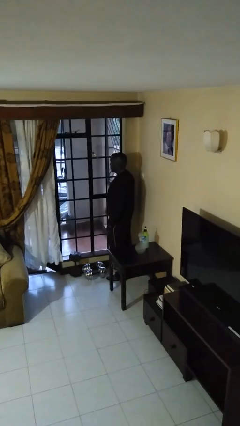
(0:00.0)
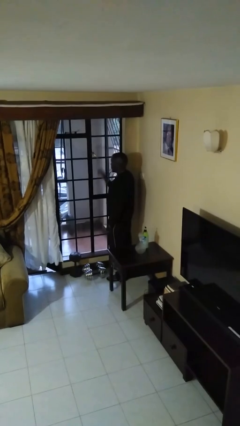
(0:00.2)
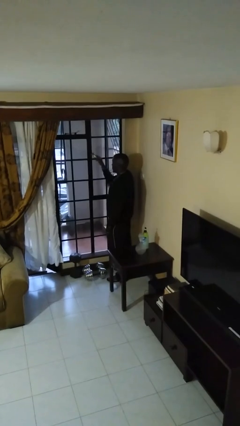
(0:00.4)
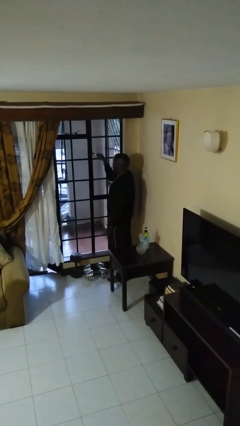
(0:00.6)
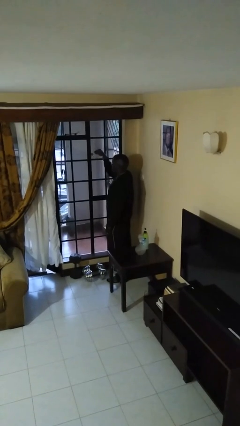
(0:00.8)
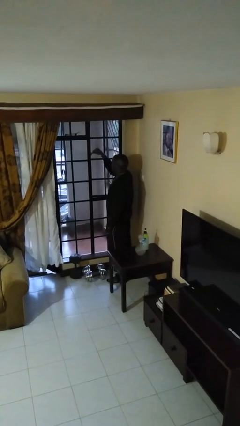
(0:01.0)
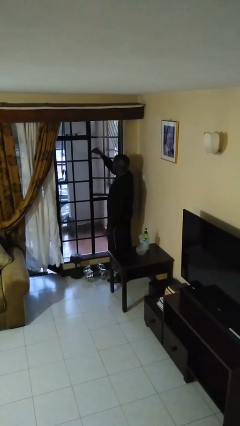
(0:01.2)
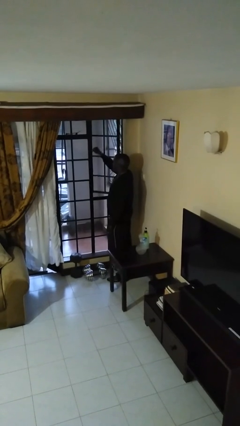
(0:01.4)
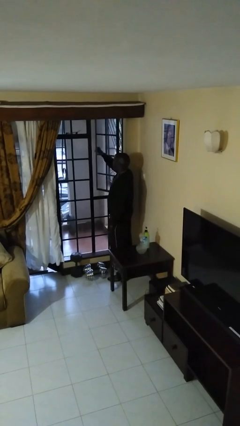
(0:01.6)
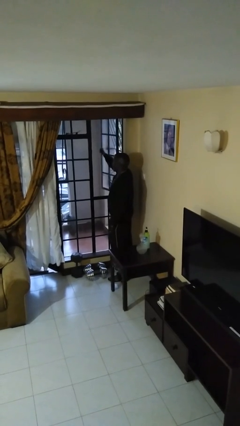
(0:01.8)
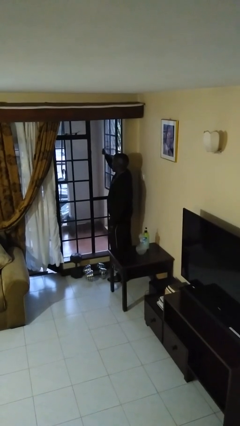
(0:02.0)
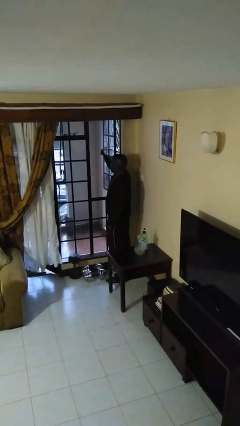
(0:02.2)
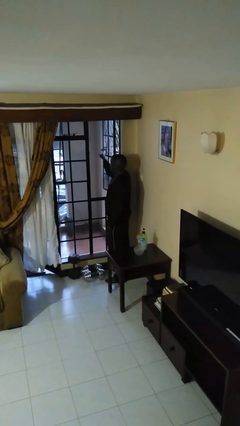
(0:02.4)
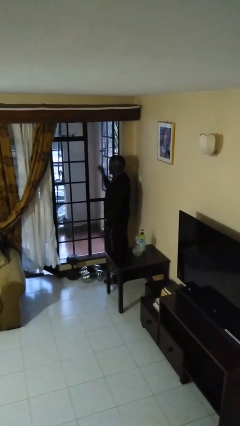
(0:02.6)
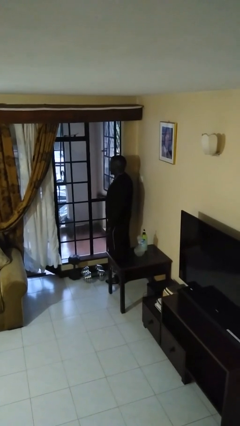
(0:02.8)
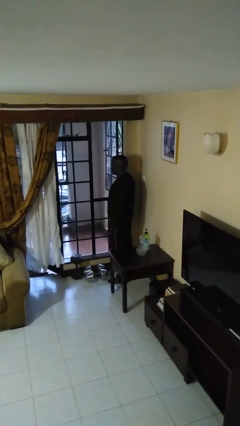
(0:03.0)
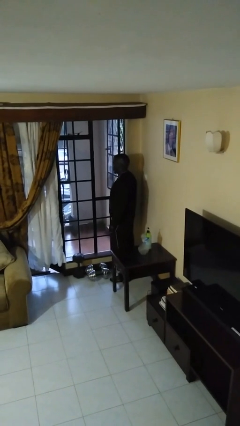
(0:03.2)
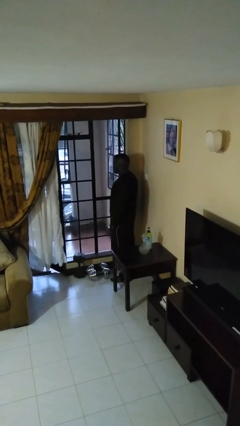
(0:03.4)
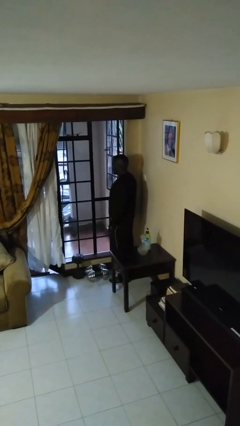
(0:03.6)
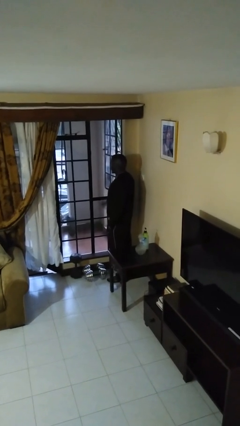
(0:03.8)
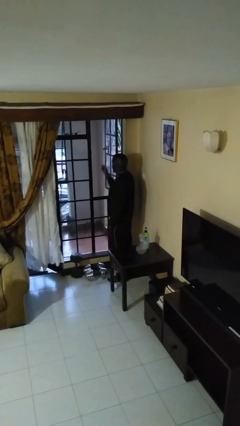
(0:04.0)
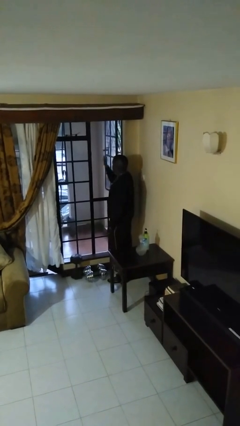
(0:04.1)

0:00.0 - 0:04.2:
person opens home window

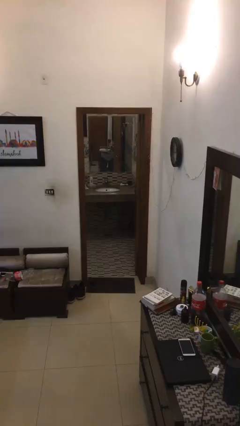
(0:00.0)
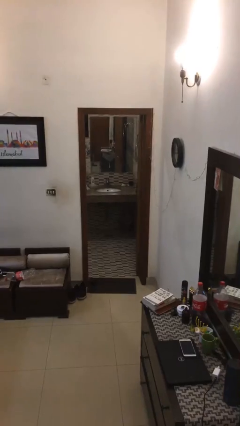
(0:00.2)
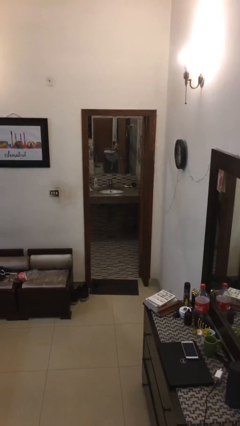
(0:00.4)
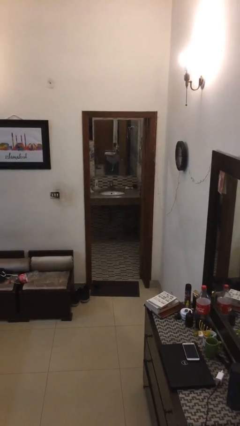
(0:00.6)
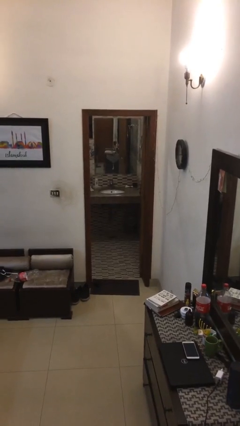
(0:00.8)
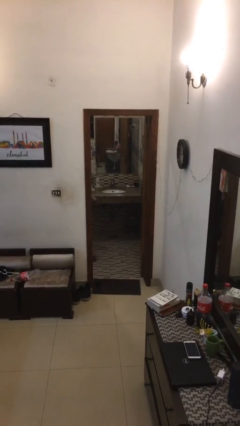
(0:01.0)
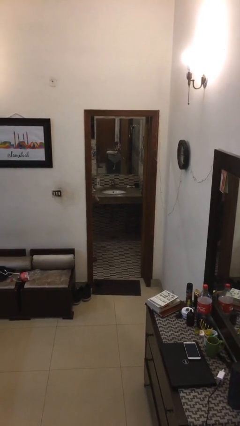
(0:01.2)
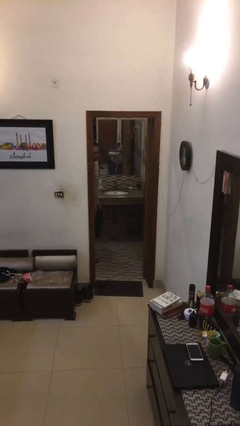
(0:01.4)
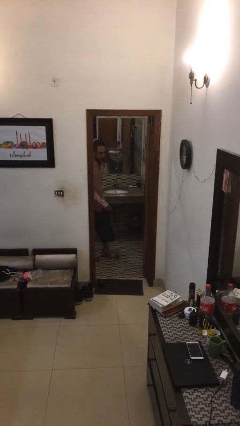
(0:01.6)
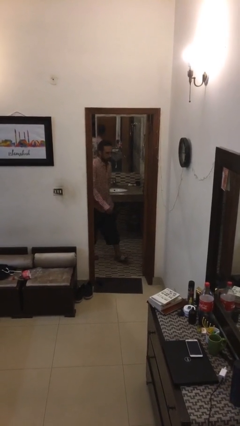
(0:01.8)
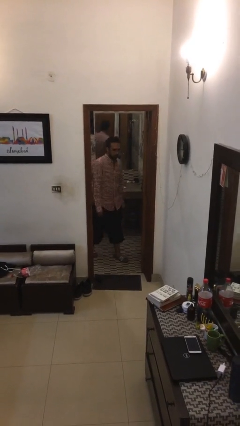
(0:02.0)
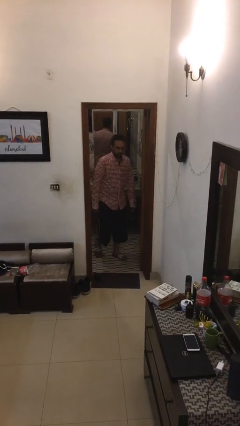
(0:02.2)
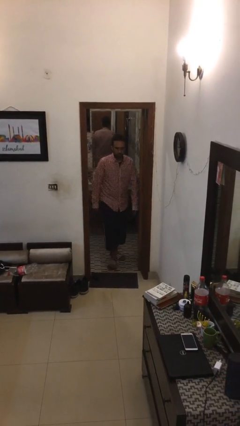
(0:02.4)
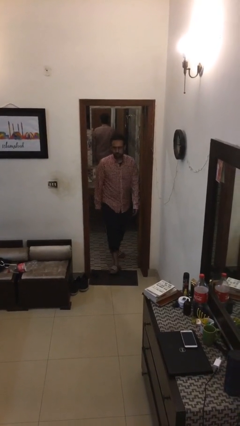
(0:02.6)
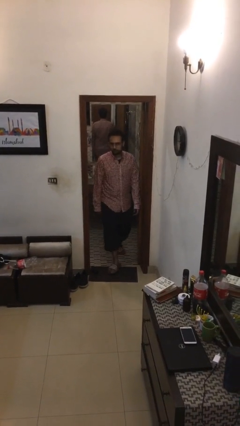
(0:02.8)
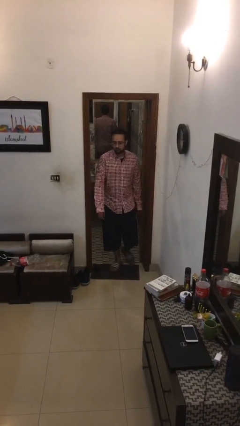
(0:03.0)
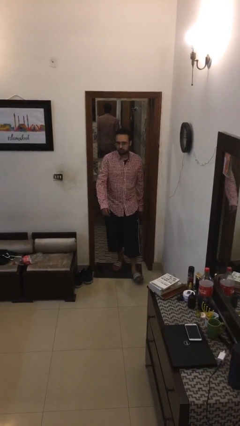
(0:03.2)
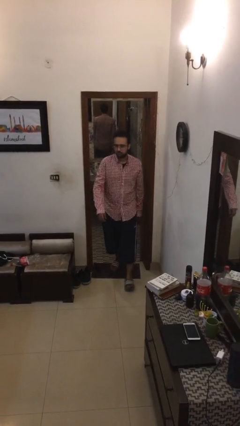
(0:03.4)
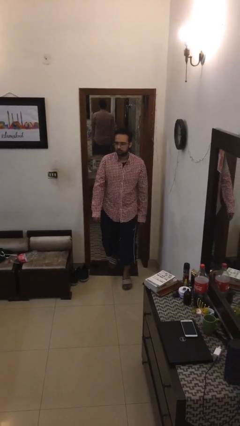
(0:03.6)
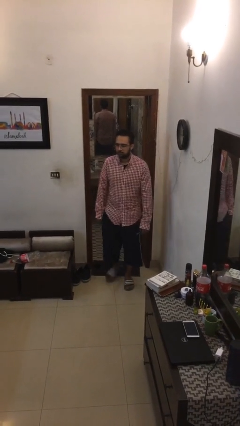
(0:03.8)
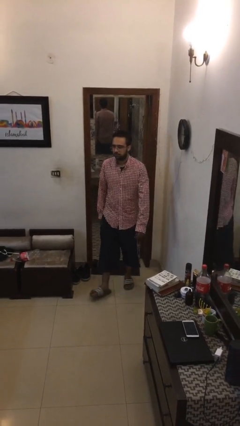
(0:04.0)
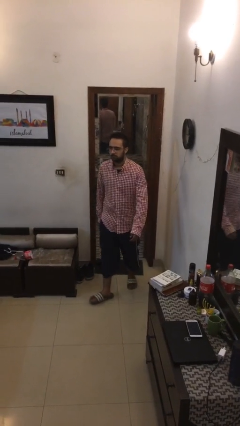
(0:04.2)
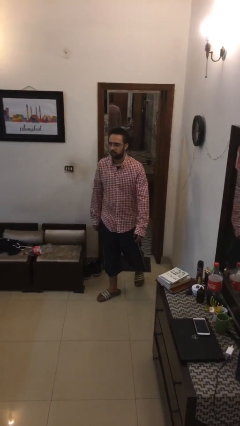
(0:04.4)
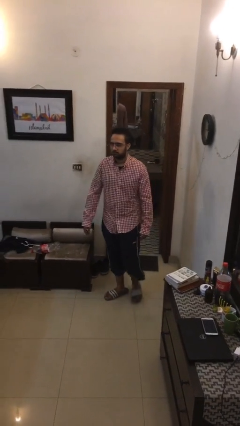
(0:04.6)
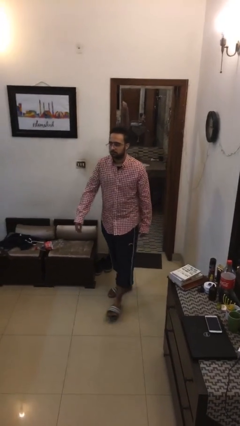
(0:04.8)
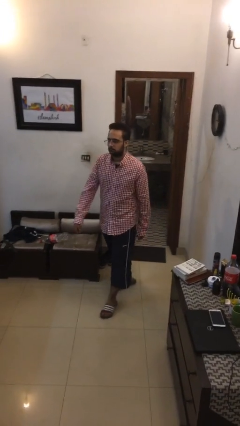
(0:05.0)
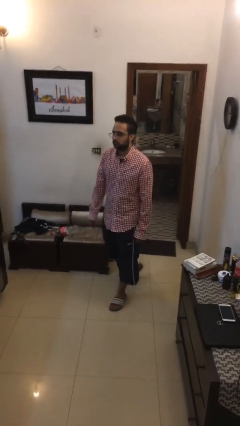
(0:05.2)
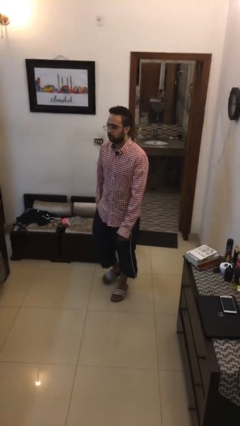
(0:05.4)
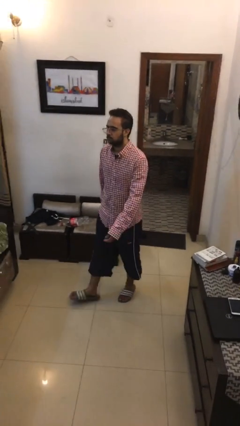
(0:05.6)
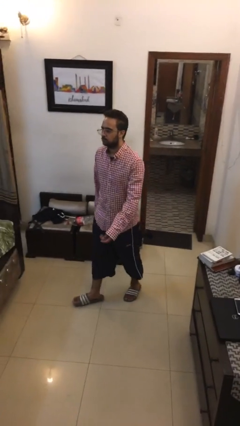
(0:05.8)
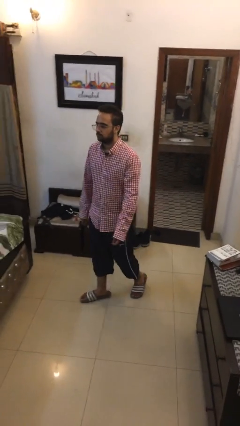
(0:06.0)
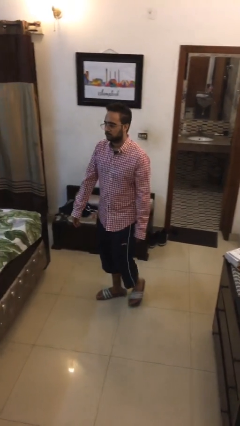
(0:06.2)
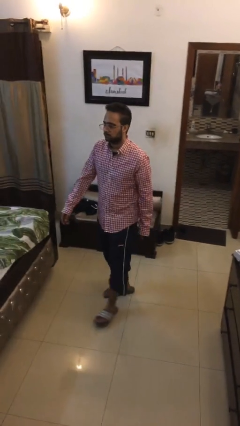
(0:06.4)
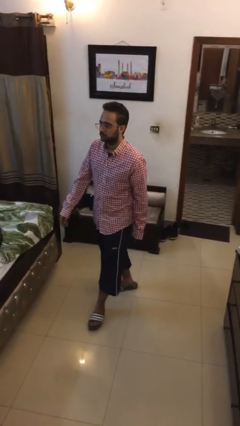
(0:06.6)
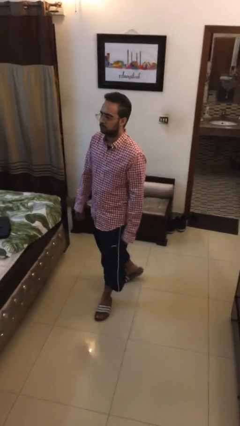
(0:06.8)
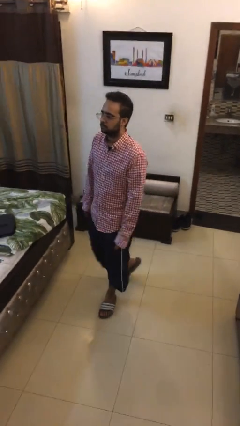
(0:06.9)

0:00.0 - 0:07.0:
person enters scene through structure

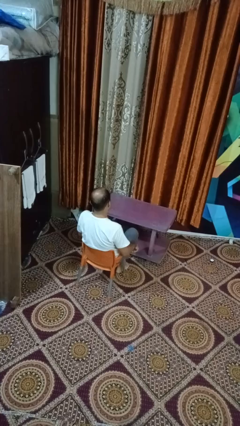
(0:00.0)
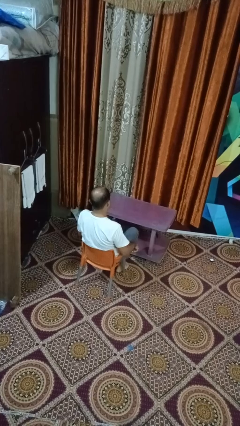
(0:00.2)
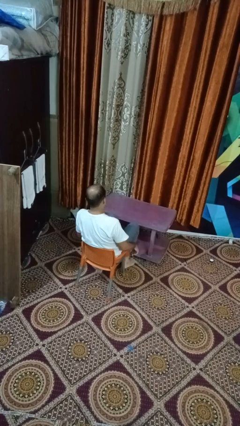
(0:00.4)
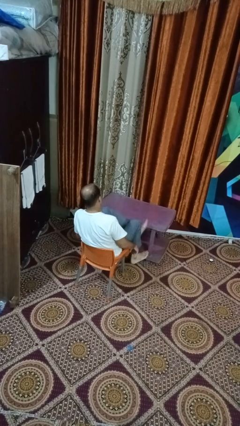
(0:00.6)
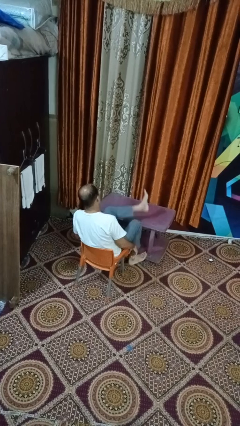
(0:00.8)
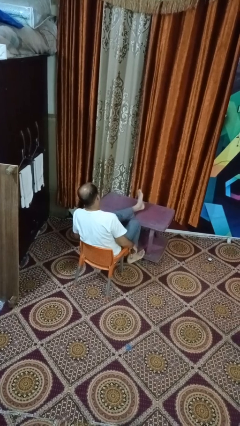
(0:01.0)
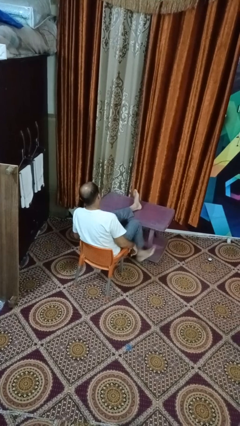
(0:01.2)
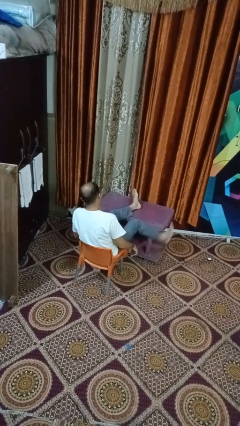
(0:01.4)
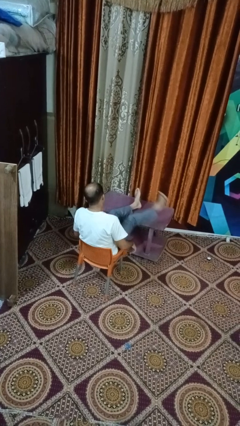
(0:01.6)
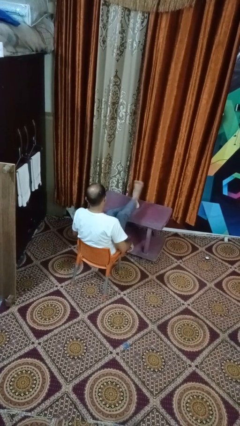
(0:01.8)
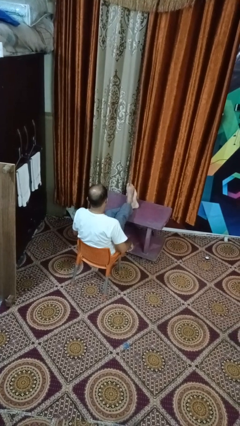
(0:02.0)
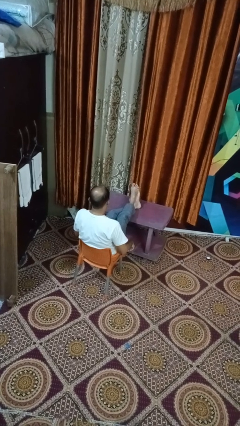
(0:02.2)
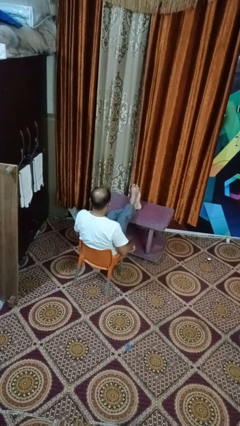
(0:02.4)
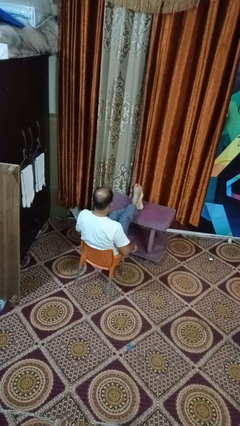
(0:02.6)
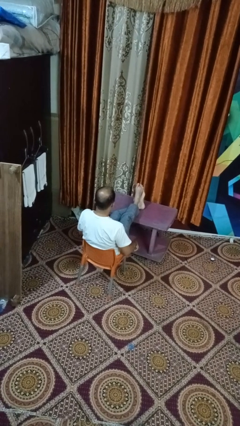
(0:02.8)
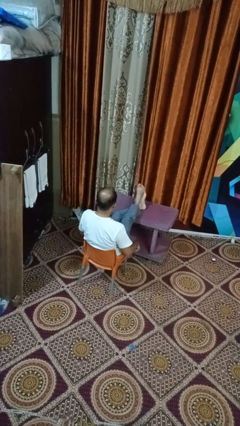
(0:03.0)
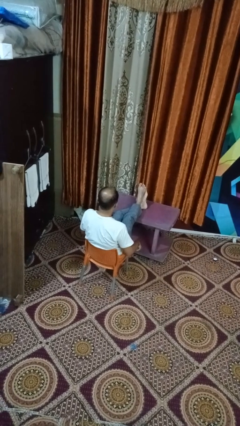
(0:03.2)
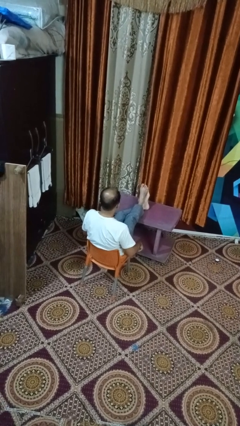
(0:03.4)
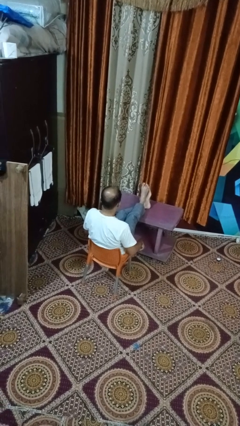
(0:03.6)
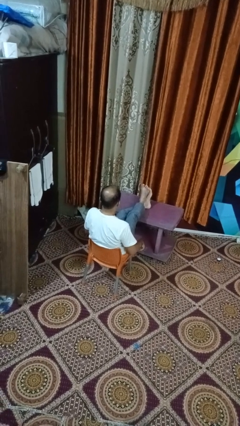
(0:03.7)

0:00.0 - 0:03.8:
person puts feet up

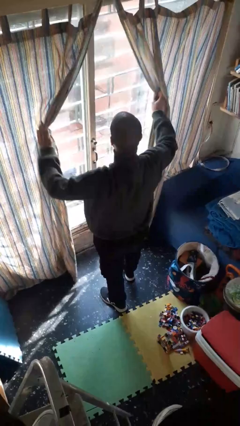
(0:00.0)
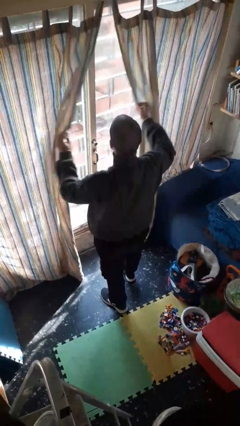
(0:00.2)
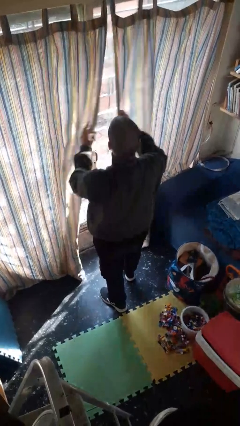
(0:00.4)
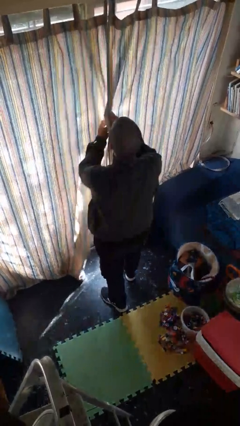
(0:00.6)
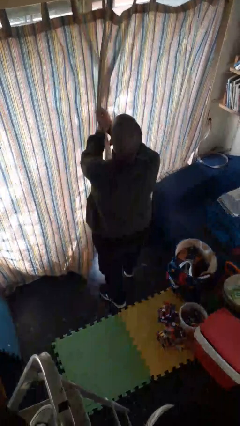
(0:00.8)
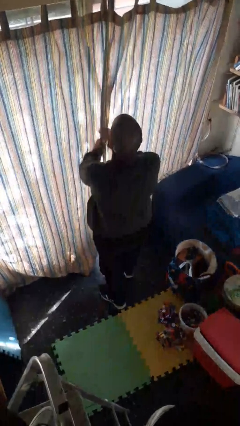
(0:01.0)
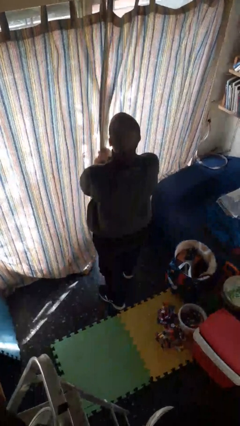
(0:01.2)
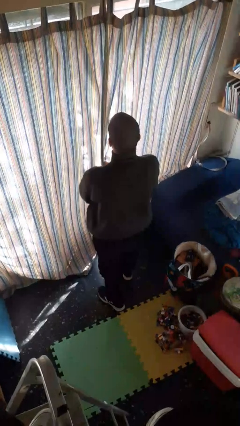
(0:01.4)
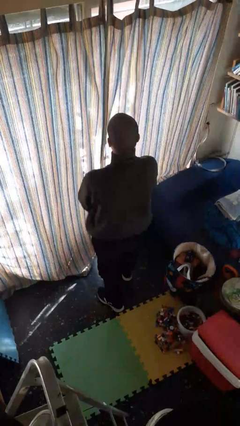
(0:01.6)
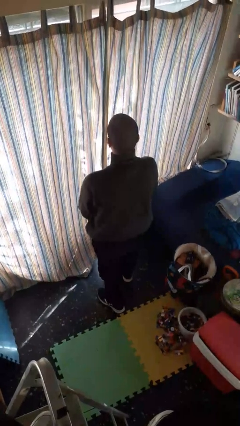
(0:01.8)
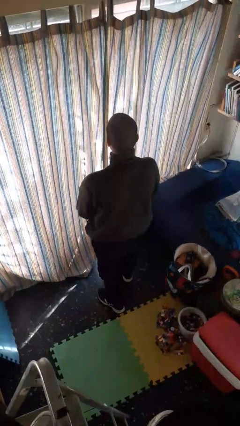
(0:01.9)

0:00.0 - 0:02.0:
person closes curtains

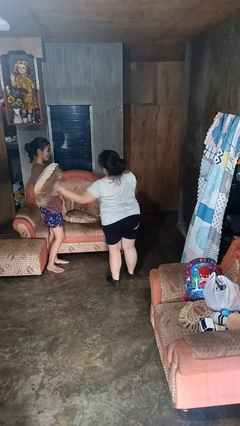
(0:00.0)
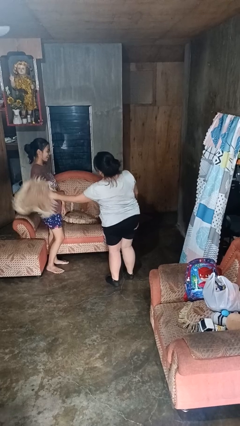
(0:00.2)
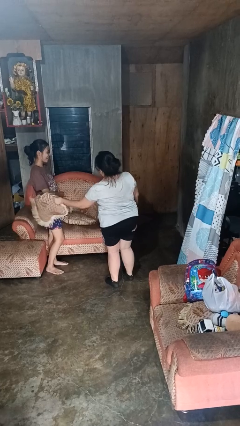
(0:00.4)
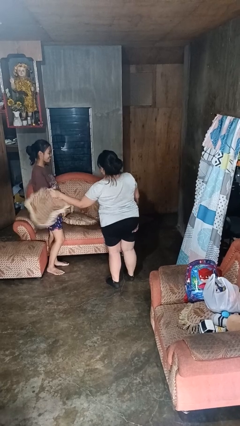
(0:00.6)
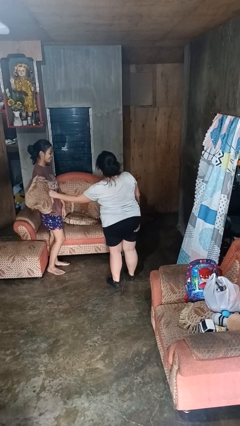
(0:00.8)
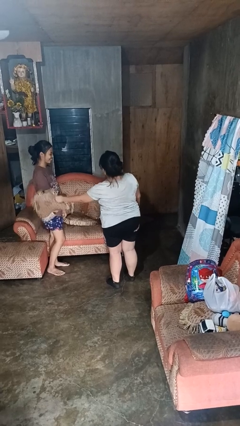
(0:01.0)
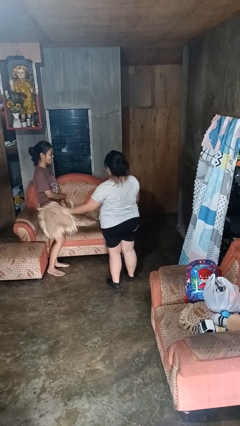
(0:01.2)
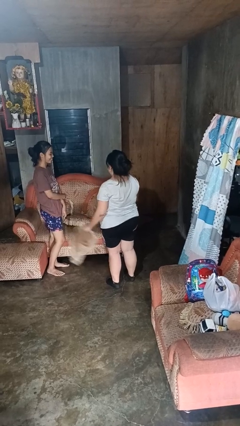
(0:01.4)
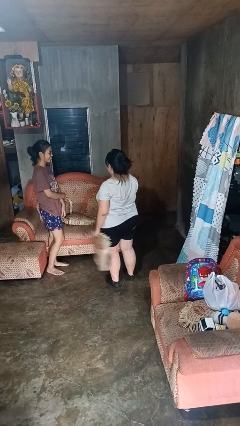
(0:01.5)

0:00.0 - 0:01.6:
person hits person with pillow
